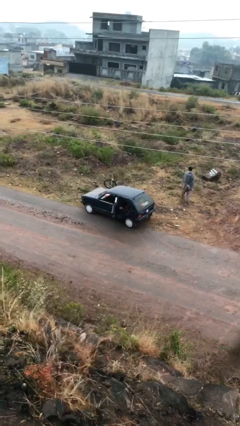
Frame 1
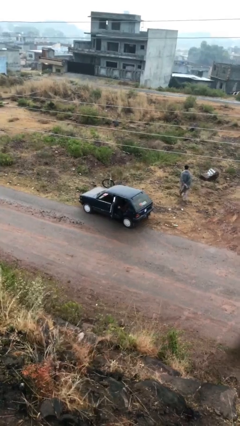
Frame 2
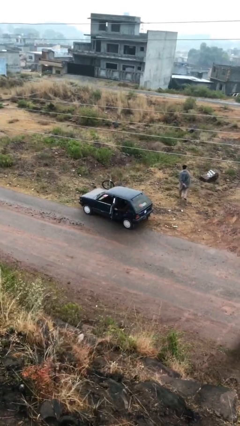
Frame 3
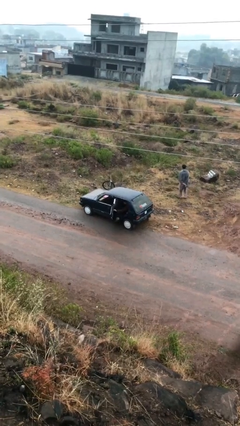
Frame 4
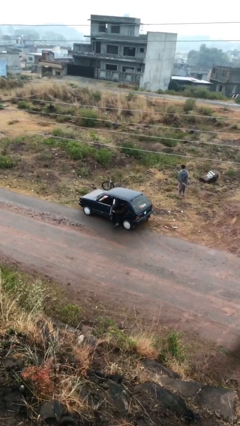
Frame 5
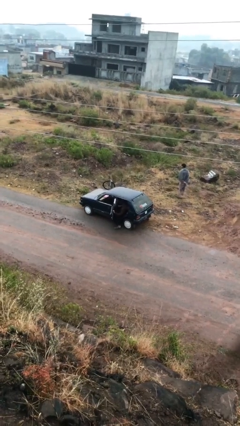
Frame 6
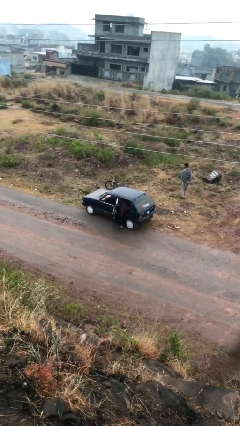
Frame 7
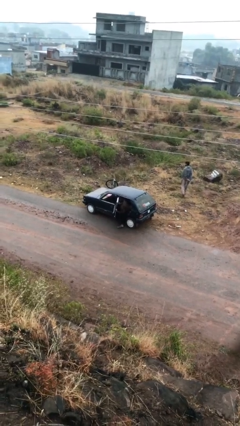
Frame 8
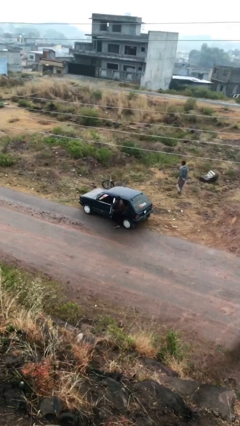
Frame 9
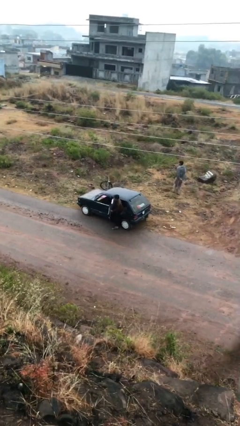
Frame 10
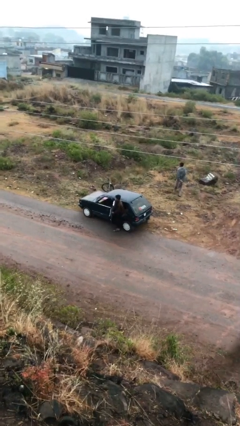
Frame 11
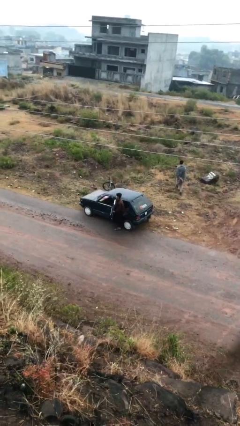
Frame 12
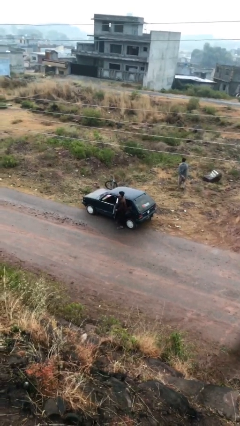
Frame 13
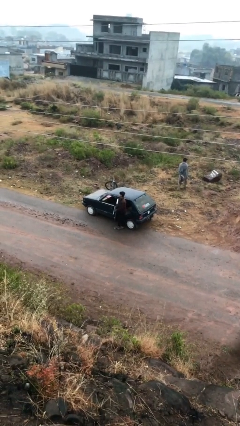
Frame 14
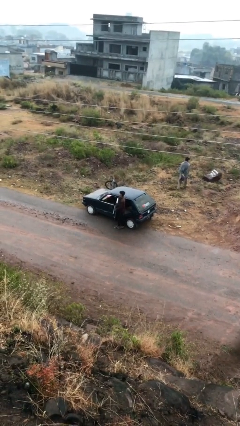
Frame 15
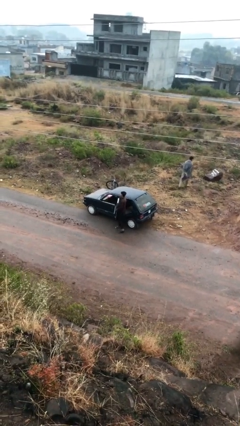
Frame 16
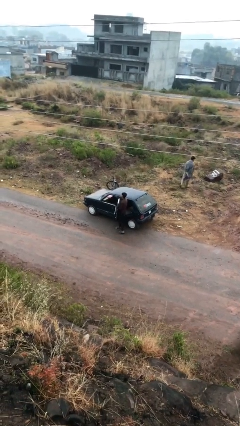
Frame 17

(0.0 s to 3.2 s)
person exits car

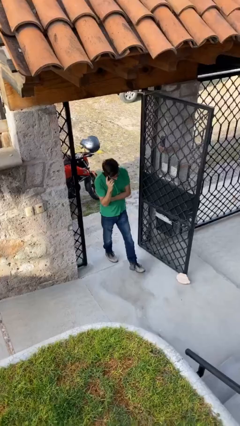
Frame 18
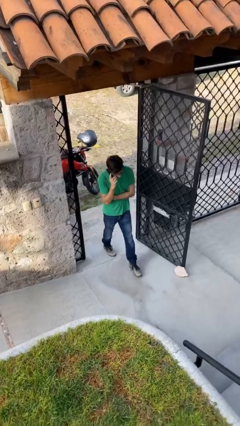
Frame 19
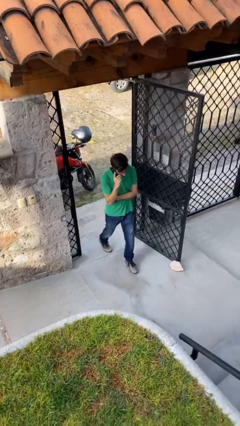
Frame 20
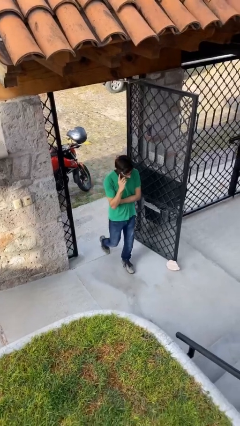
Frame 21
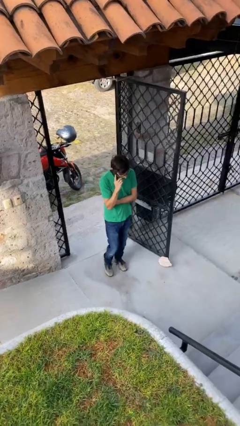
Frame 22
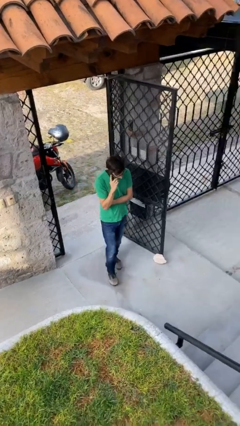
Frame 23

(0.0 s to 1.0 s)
person enters scene through structure

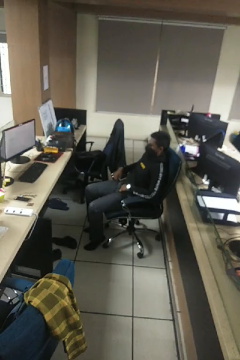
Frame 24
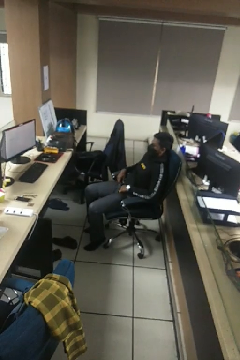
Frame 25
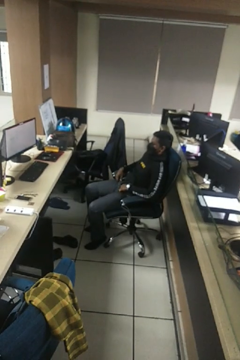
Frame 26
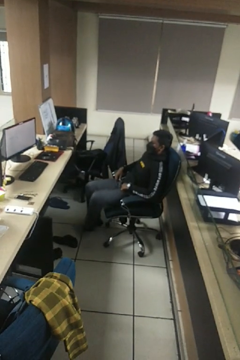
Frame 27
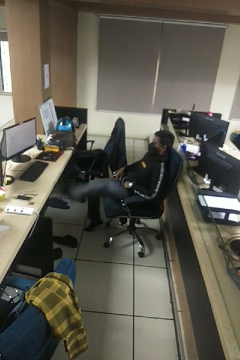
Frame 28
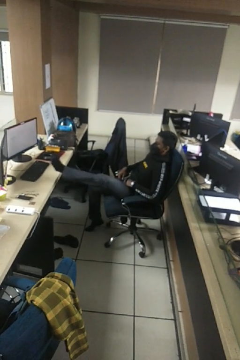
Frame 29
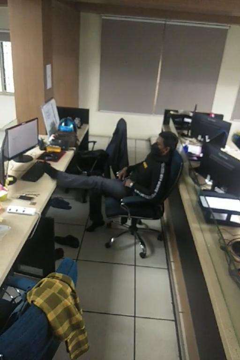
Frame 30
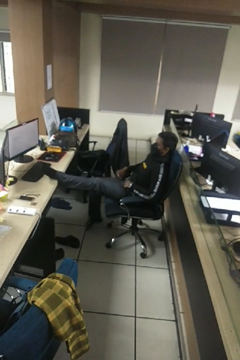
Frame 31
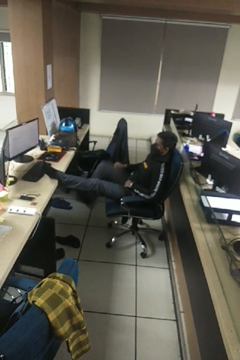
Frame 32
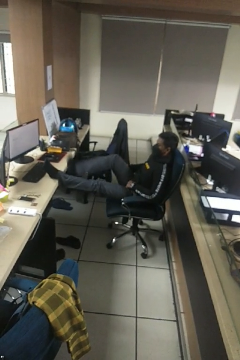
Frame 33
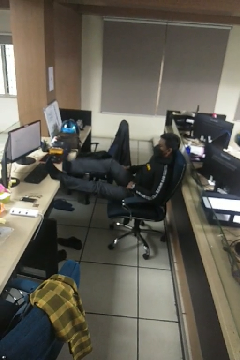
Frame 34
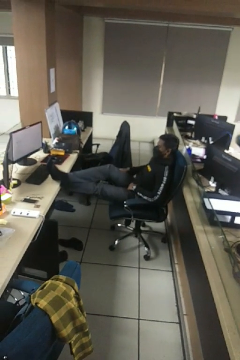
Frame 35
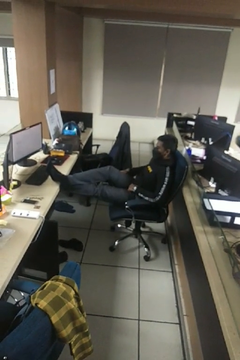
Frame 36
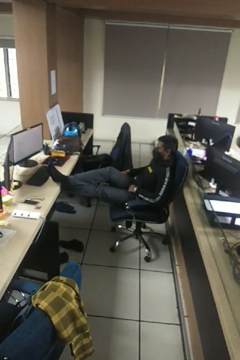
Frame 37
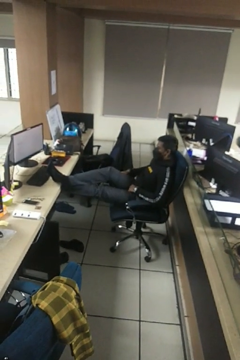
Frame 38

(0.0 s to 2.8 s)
person puts feet up

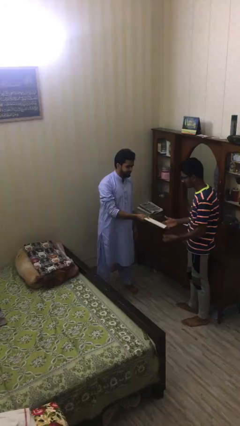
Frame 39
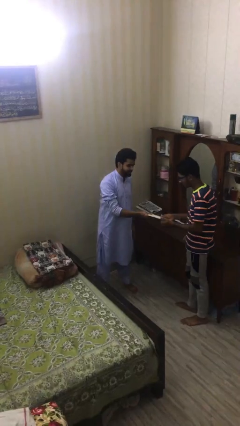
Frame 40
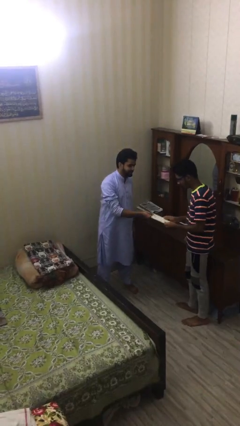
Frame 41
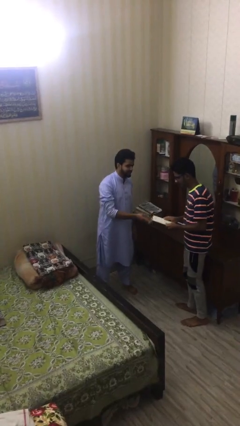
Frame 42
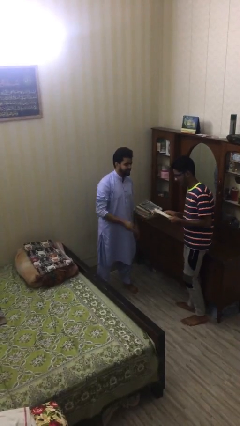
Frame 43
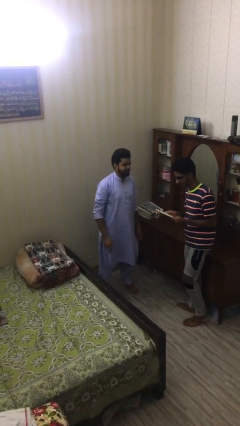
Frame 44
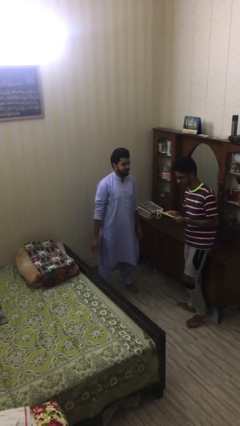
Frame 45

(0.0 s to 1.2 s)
person transfers object to person

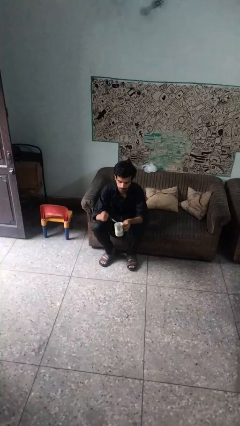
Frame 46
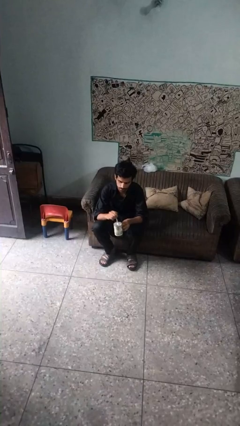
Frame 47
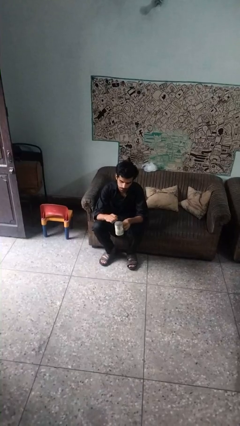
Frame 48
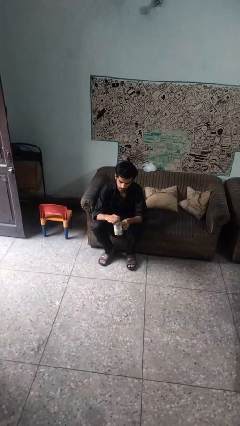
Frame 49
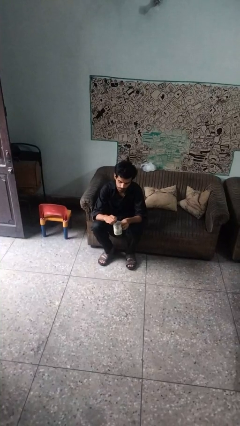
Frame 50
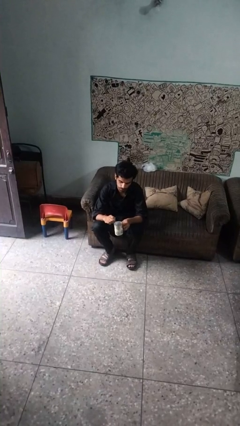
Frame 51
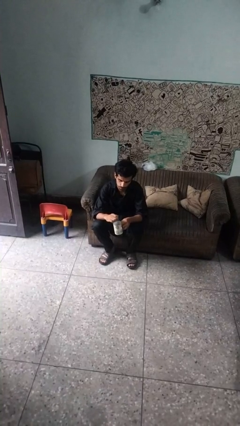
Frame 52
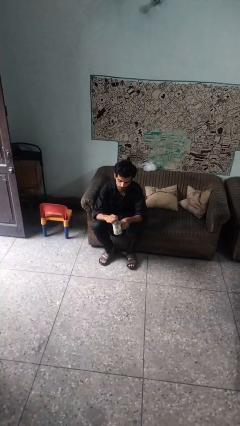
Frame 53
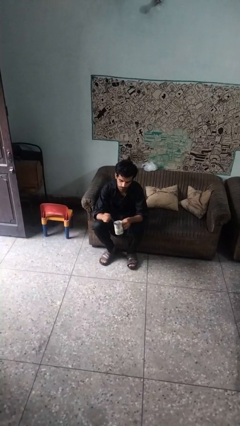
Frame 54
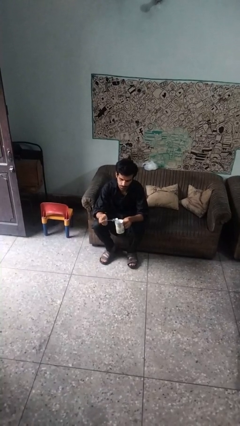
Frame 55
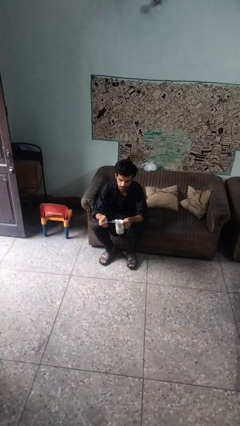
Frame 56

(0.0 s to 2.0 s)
person stirs mug

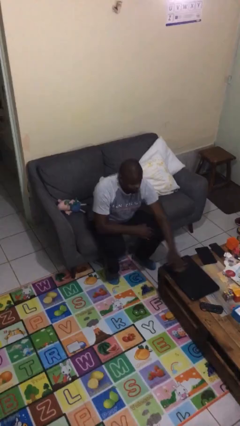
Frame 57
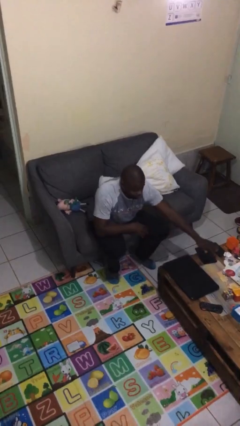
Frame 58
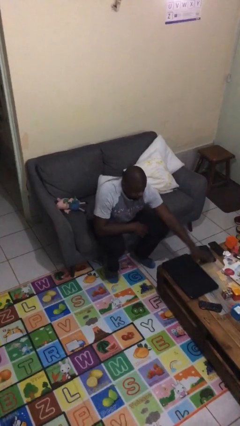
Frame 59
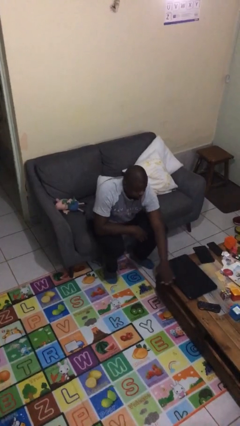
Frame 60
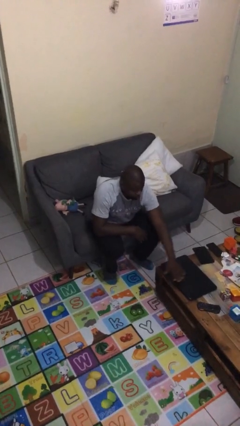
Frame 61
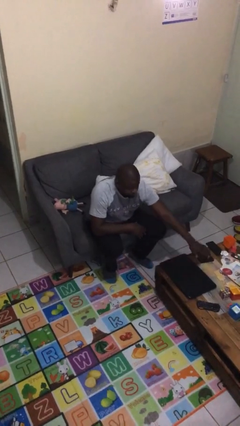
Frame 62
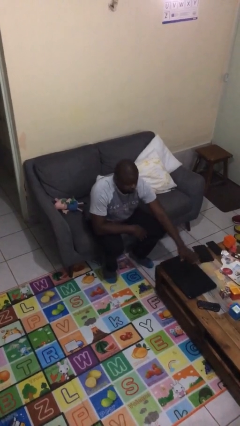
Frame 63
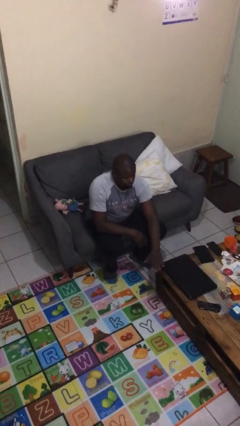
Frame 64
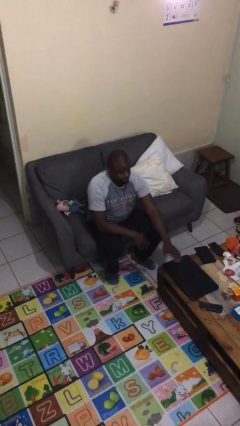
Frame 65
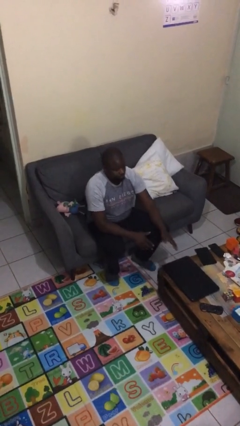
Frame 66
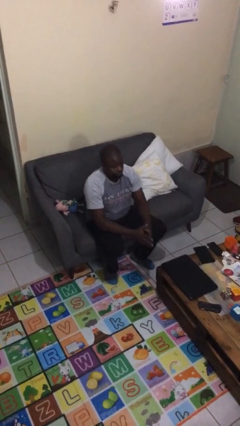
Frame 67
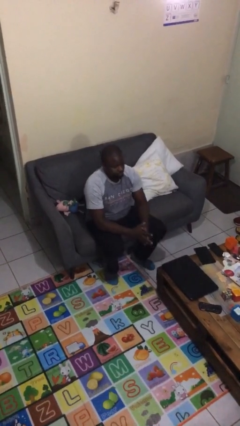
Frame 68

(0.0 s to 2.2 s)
person waves hand over object

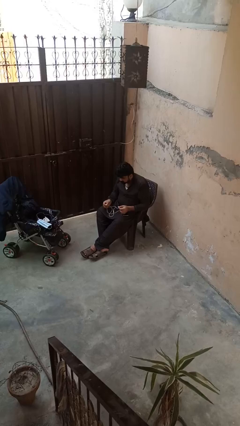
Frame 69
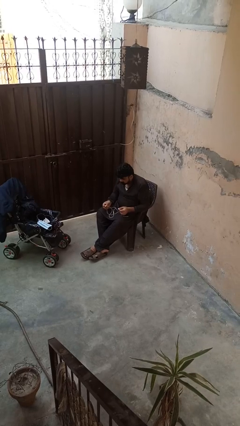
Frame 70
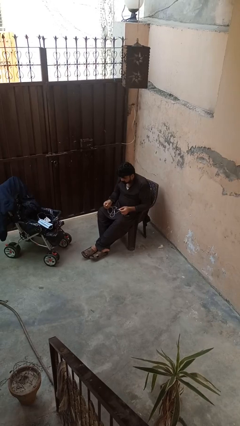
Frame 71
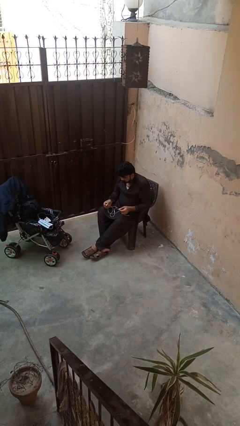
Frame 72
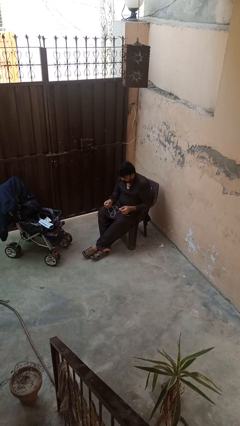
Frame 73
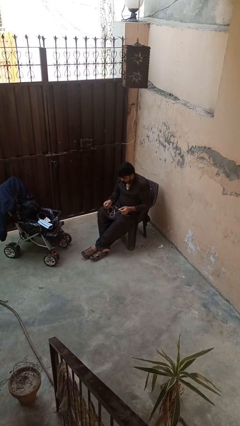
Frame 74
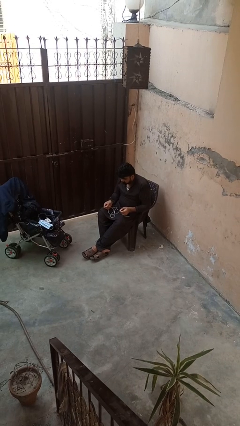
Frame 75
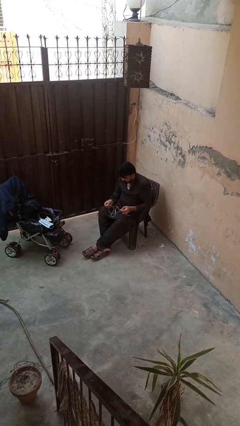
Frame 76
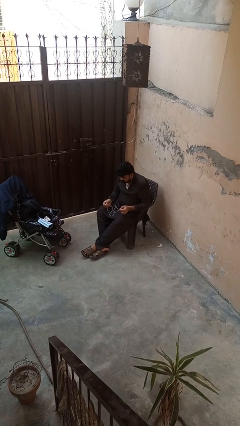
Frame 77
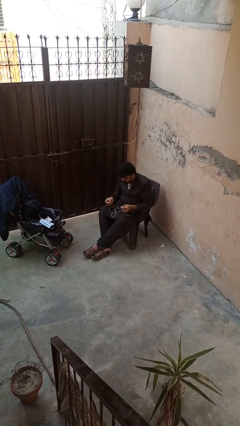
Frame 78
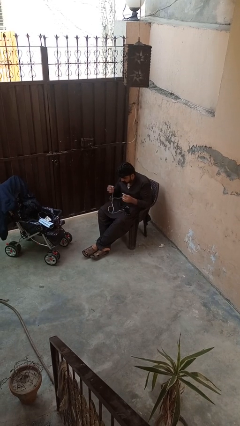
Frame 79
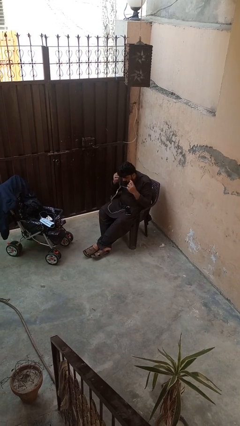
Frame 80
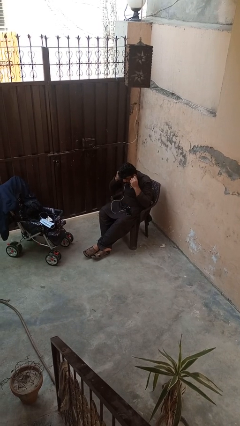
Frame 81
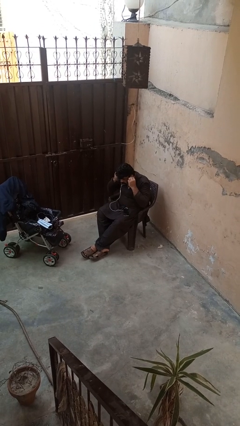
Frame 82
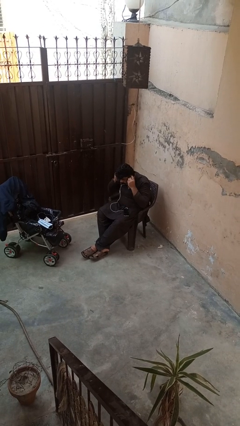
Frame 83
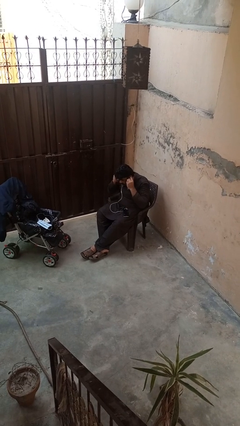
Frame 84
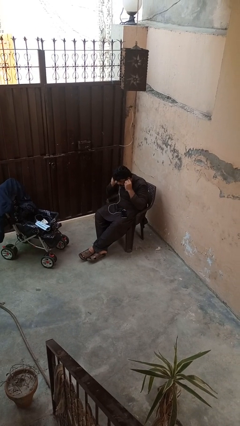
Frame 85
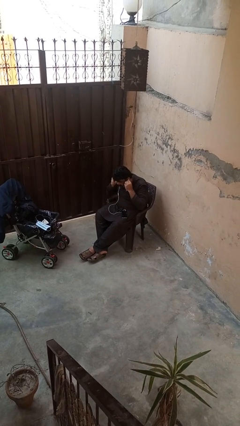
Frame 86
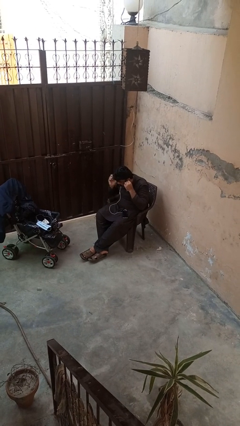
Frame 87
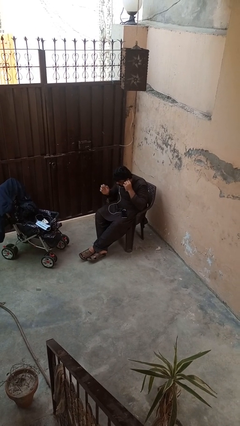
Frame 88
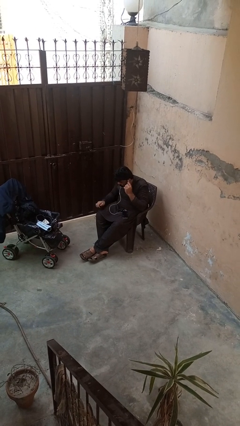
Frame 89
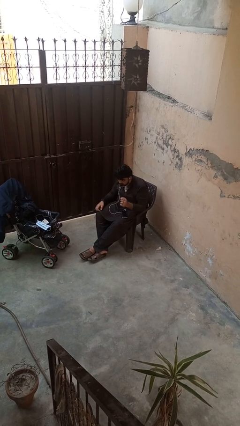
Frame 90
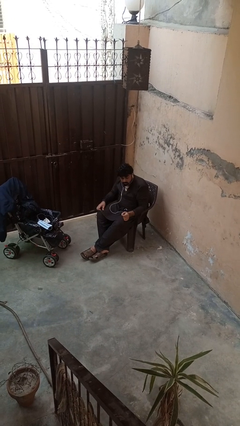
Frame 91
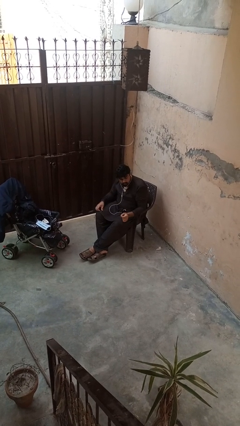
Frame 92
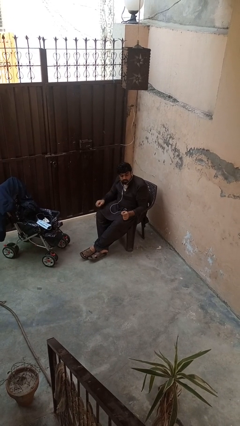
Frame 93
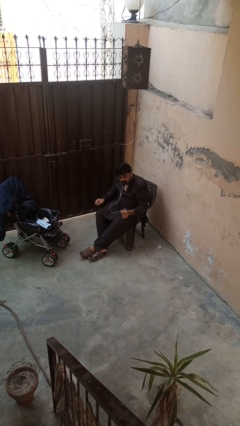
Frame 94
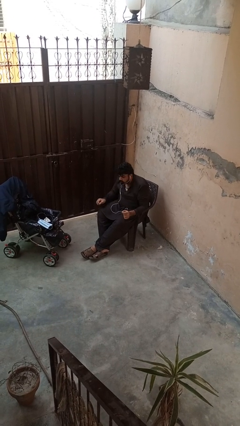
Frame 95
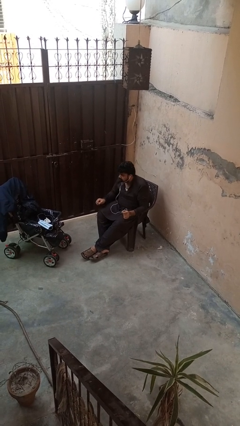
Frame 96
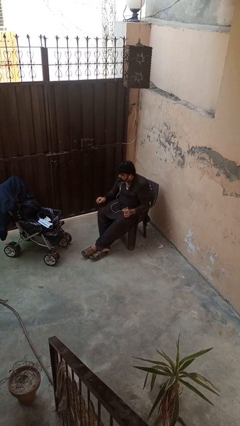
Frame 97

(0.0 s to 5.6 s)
person puts on headphones
